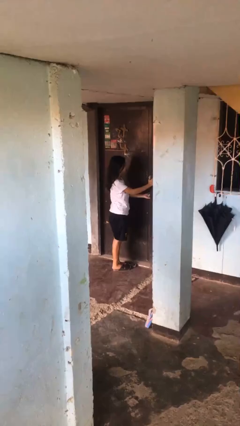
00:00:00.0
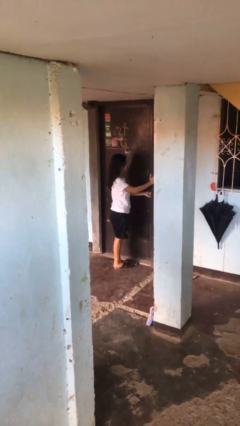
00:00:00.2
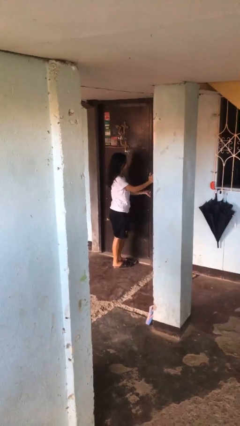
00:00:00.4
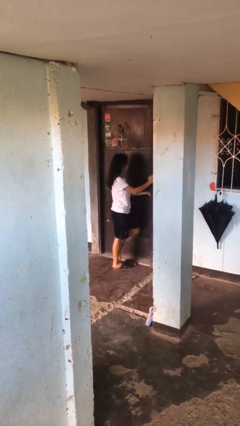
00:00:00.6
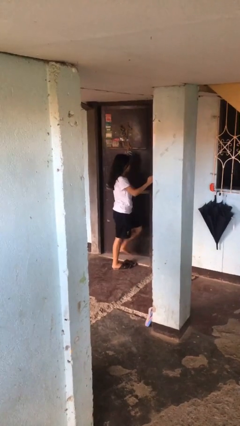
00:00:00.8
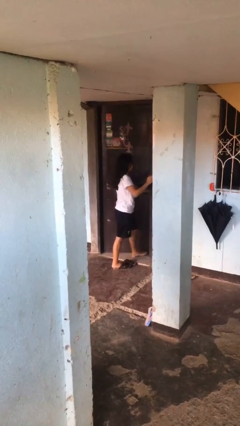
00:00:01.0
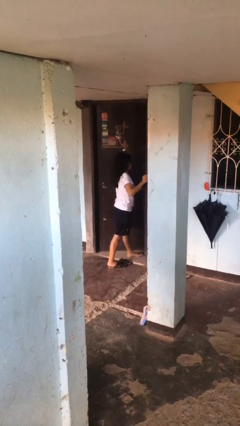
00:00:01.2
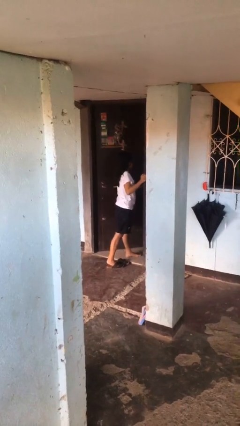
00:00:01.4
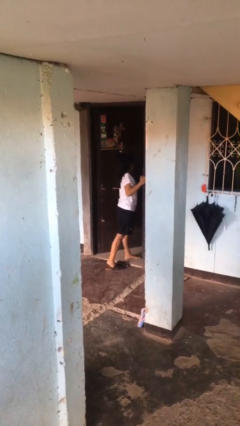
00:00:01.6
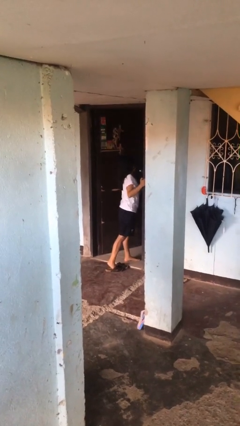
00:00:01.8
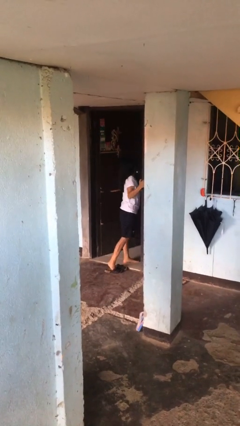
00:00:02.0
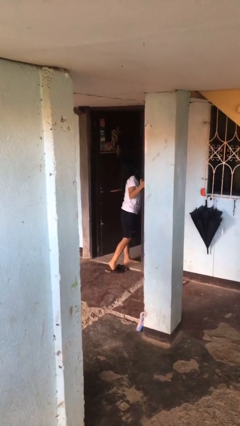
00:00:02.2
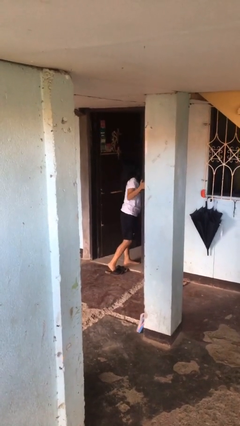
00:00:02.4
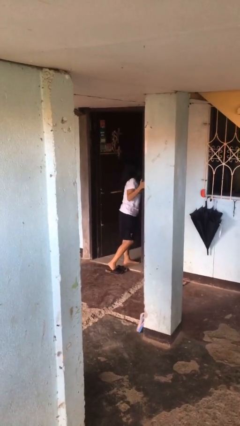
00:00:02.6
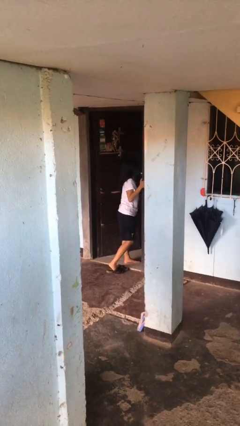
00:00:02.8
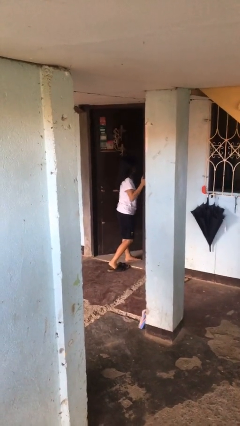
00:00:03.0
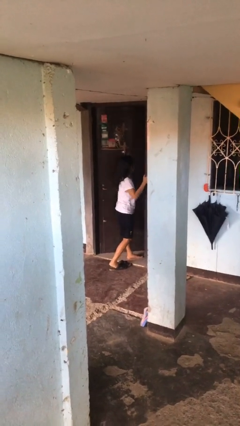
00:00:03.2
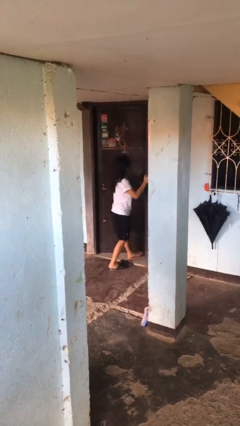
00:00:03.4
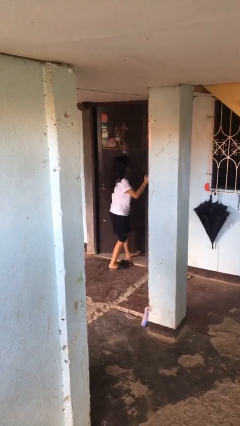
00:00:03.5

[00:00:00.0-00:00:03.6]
person opens facility door

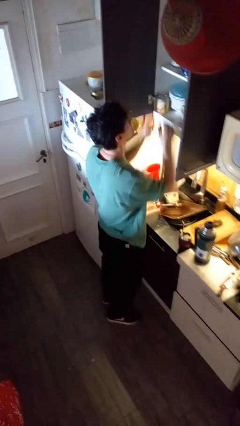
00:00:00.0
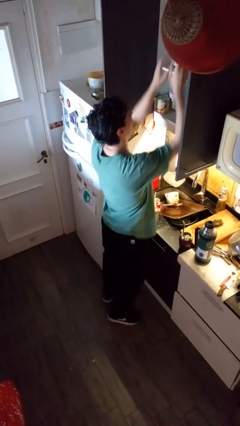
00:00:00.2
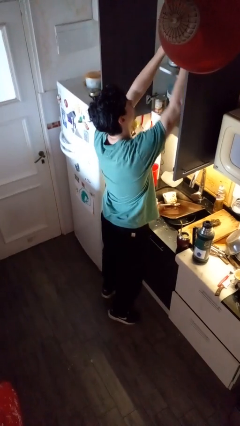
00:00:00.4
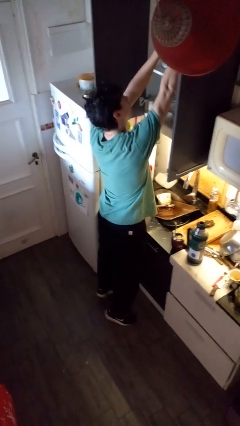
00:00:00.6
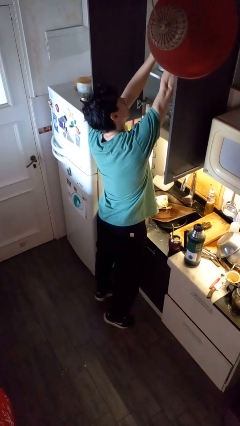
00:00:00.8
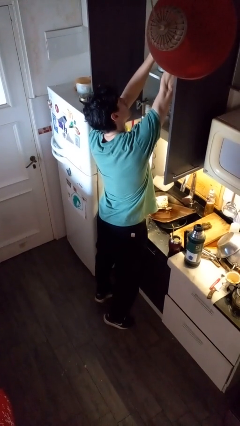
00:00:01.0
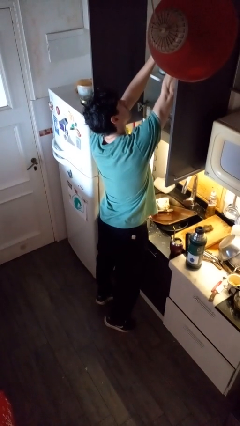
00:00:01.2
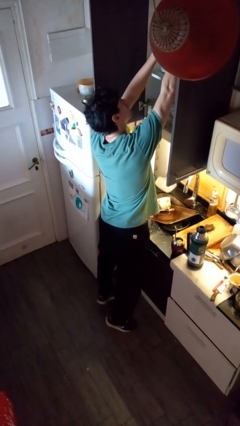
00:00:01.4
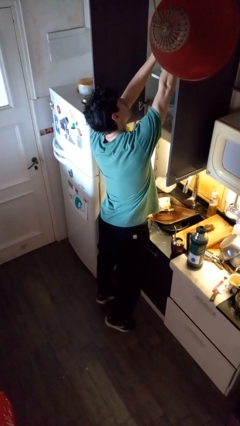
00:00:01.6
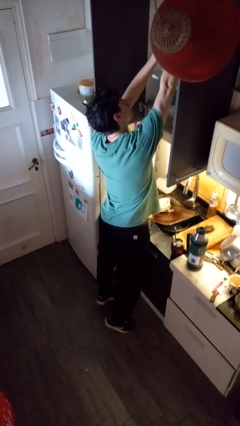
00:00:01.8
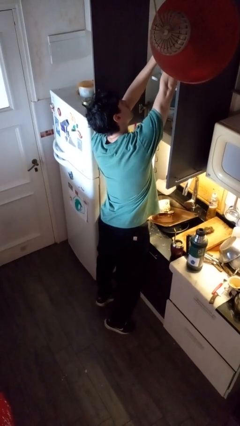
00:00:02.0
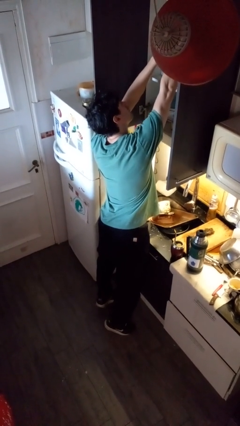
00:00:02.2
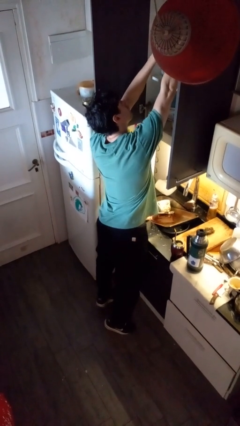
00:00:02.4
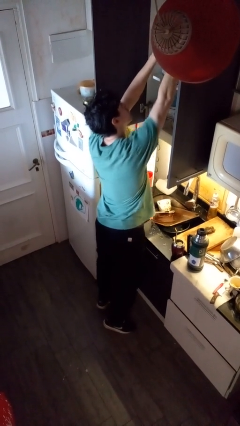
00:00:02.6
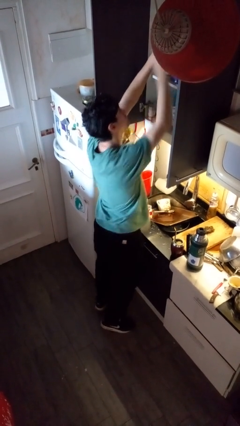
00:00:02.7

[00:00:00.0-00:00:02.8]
person searches in kitchen drawer

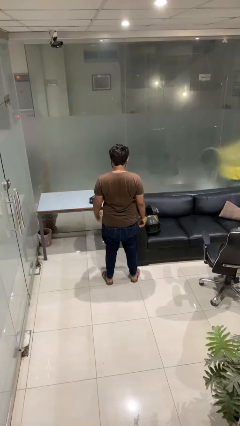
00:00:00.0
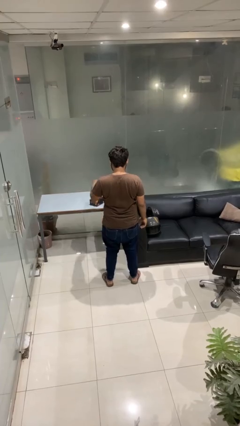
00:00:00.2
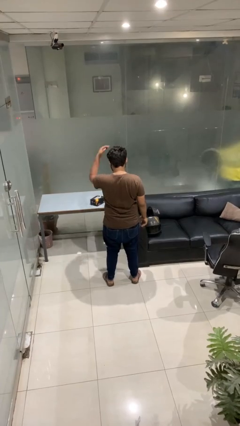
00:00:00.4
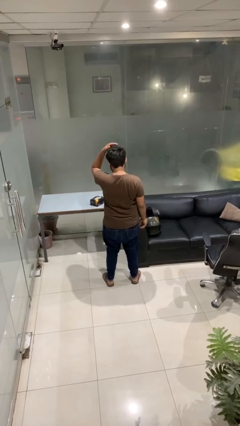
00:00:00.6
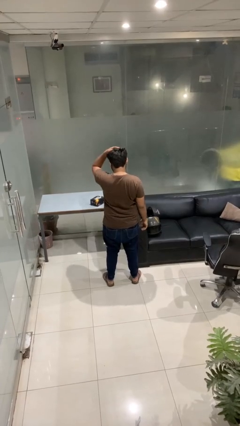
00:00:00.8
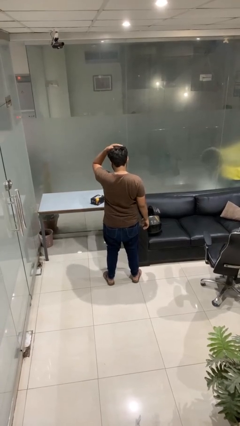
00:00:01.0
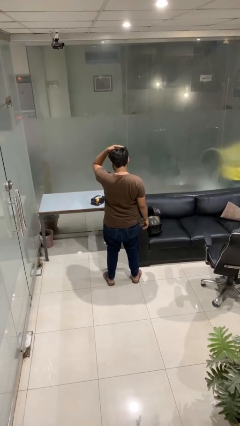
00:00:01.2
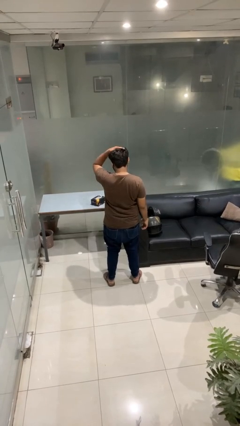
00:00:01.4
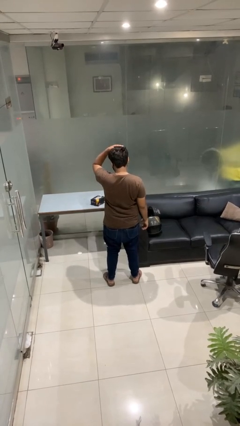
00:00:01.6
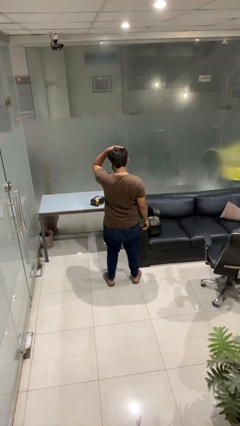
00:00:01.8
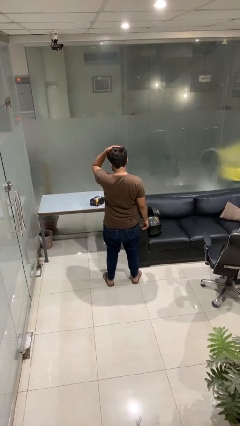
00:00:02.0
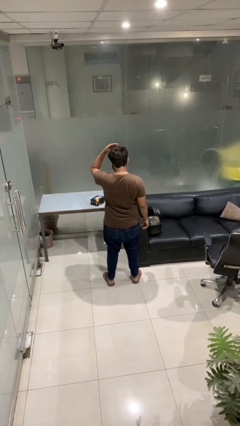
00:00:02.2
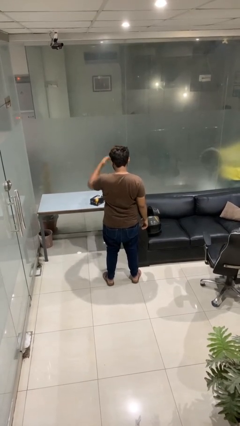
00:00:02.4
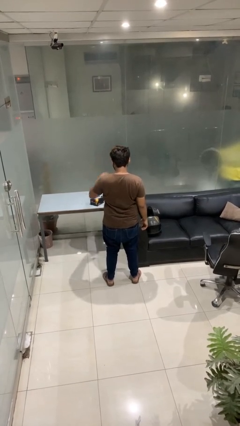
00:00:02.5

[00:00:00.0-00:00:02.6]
person pats head

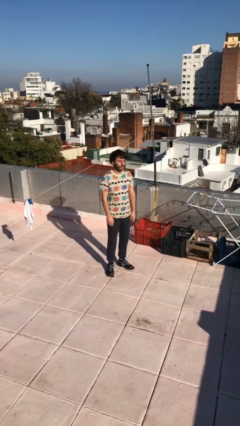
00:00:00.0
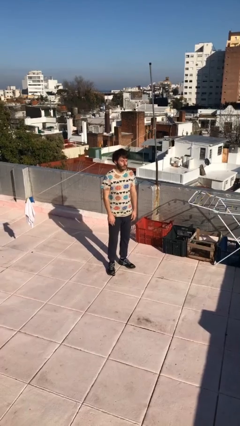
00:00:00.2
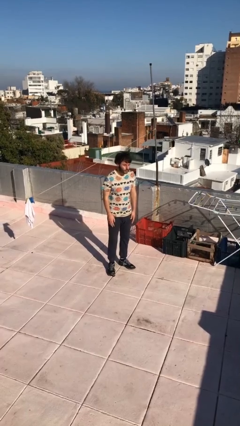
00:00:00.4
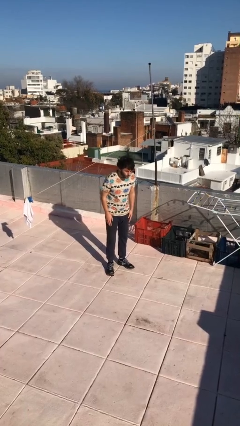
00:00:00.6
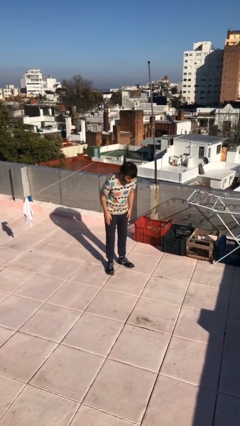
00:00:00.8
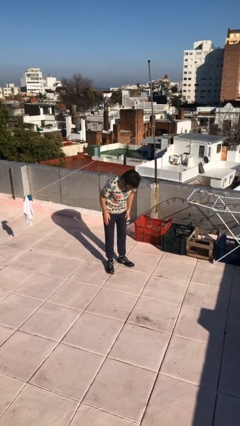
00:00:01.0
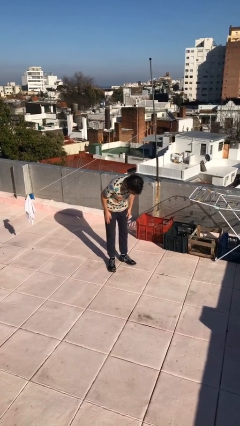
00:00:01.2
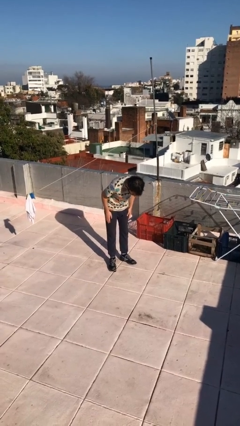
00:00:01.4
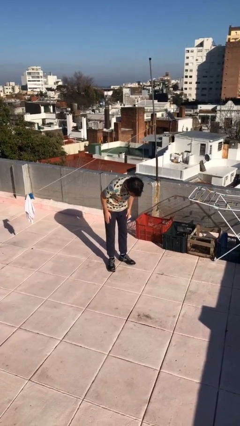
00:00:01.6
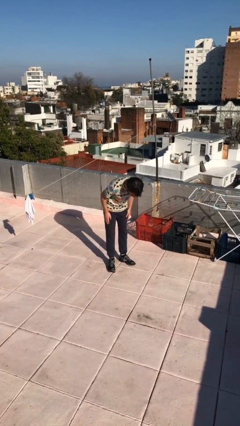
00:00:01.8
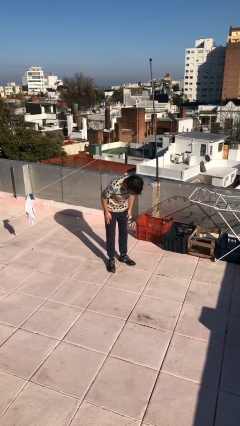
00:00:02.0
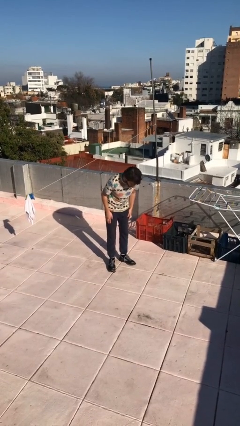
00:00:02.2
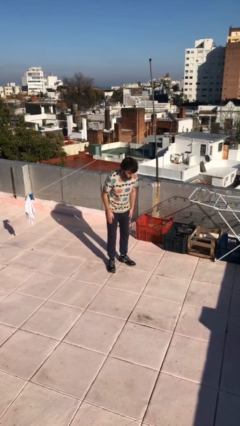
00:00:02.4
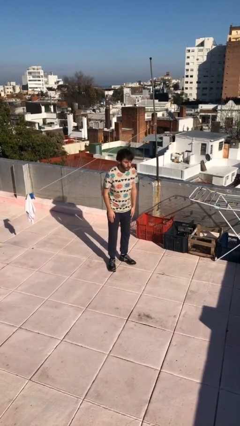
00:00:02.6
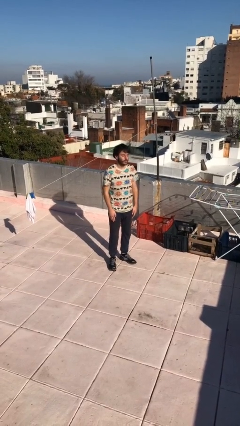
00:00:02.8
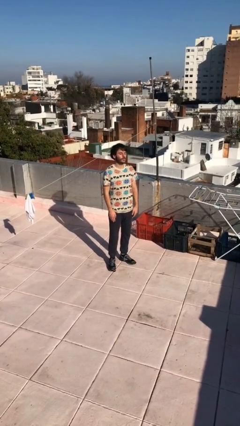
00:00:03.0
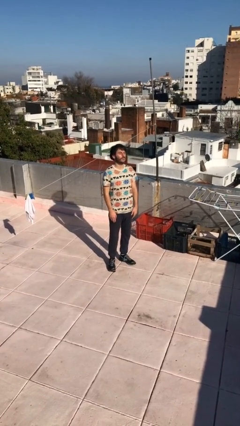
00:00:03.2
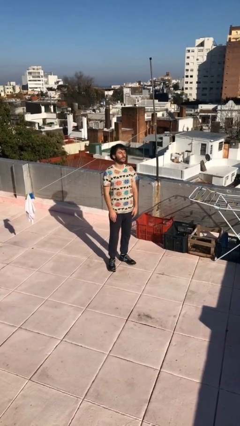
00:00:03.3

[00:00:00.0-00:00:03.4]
person bows

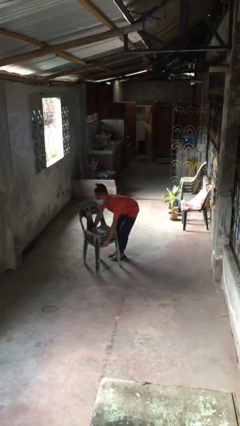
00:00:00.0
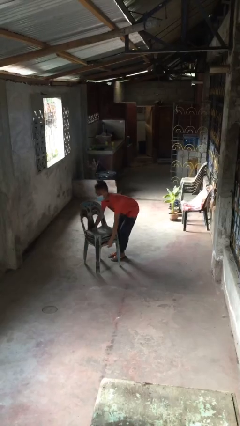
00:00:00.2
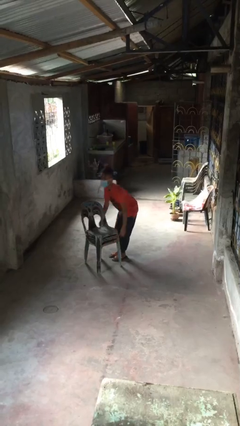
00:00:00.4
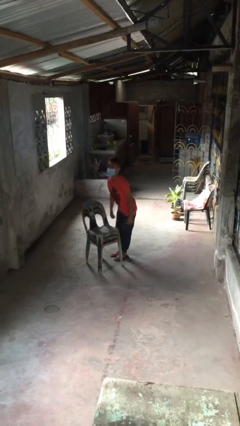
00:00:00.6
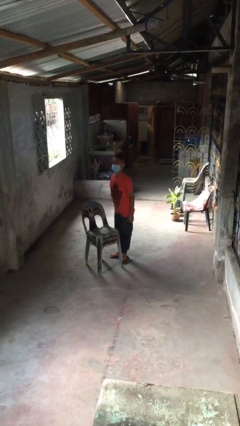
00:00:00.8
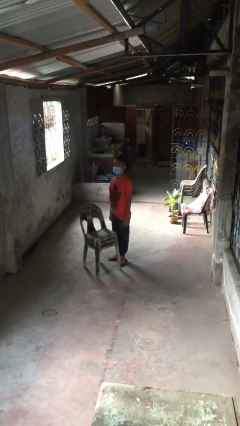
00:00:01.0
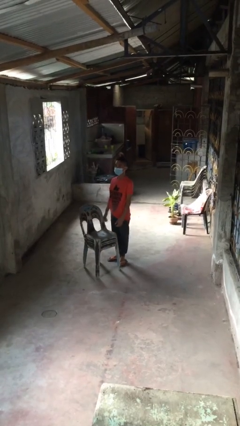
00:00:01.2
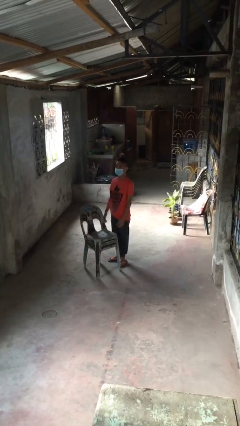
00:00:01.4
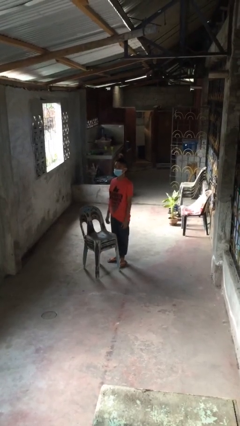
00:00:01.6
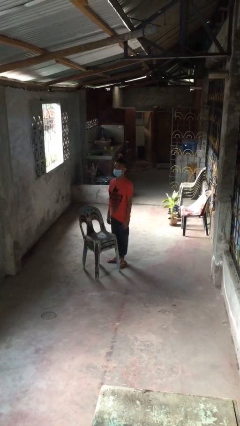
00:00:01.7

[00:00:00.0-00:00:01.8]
person puts down object on floor

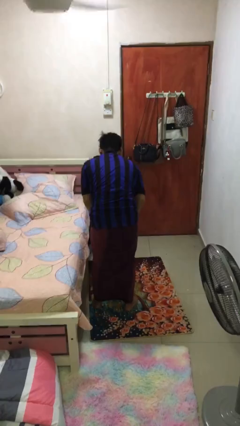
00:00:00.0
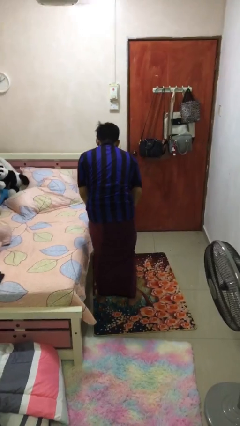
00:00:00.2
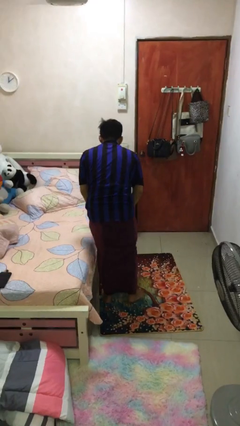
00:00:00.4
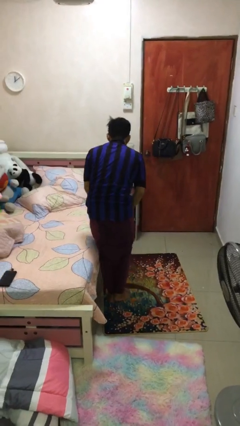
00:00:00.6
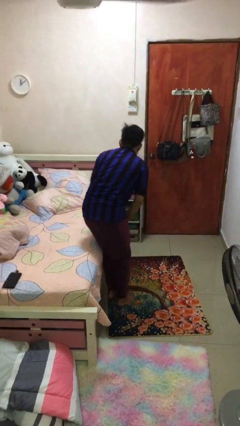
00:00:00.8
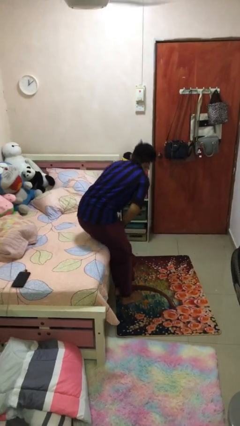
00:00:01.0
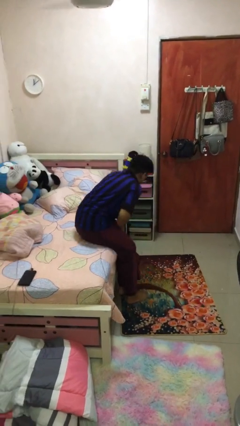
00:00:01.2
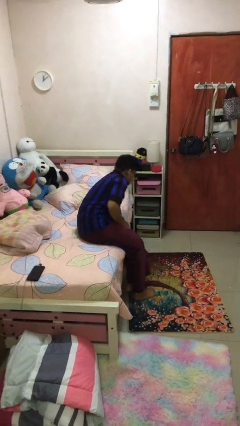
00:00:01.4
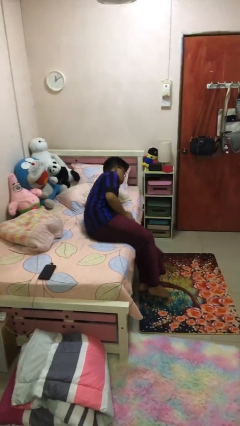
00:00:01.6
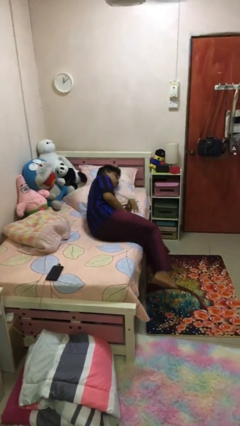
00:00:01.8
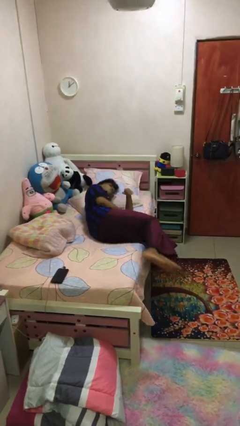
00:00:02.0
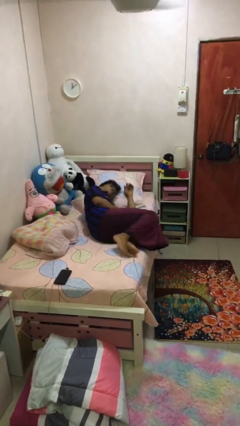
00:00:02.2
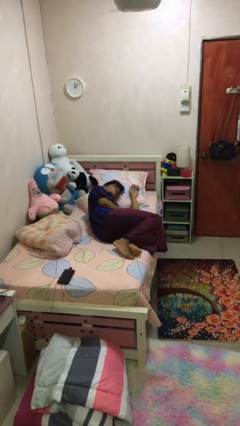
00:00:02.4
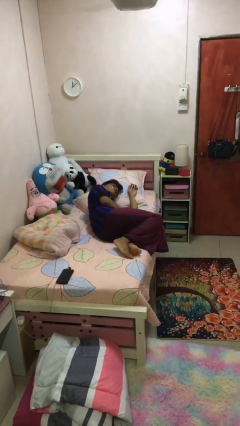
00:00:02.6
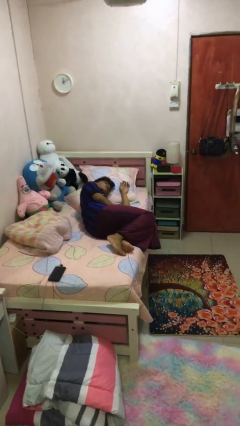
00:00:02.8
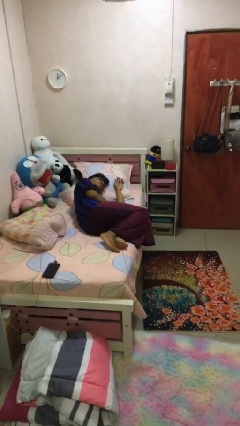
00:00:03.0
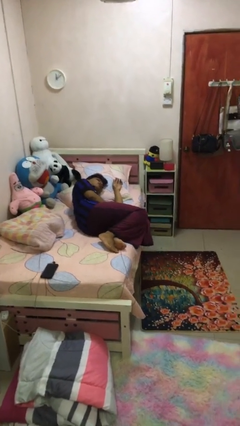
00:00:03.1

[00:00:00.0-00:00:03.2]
person lies down on bed
